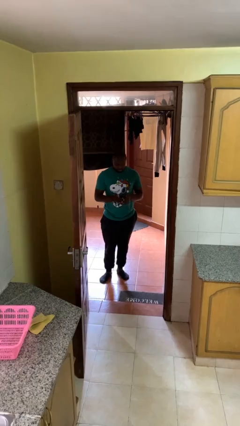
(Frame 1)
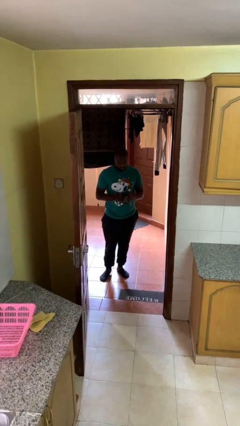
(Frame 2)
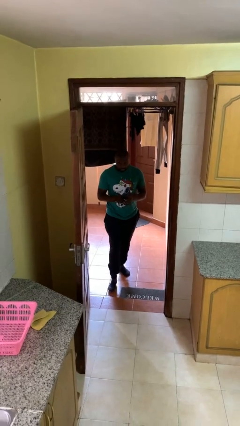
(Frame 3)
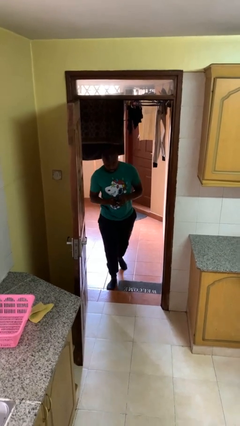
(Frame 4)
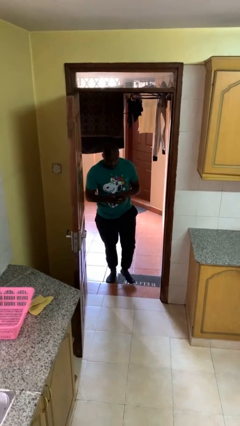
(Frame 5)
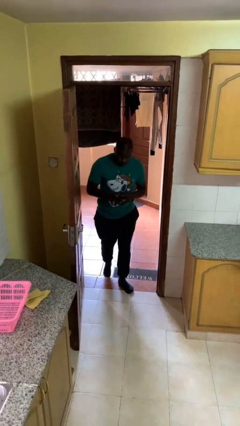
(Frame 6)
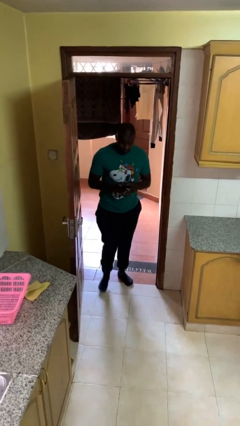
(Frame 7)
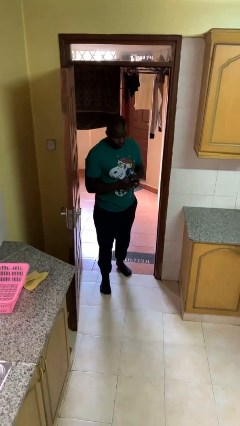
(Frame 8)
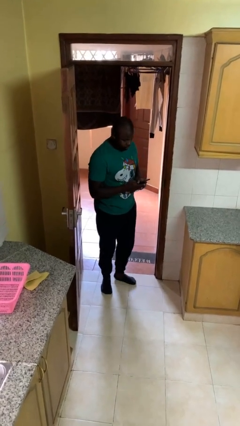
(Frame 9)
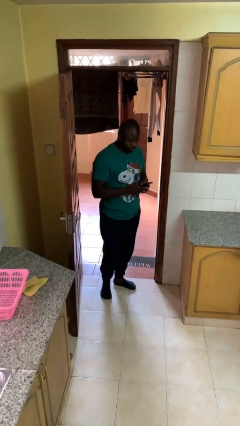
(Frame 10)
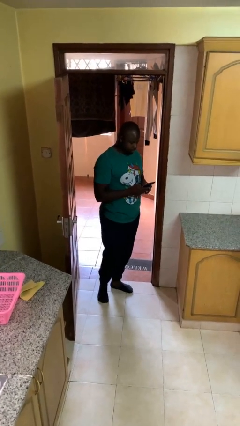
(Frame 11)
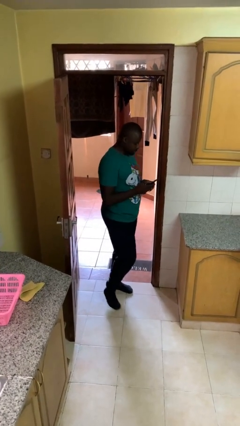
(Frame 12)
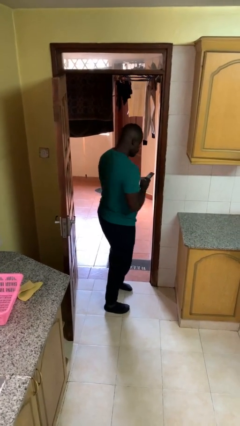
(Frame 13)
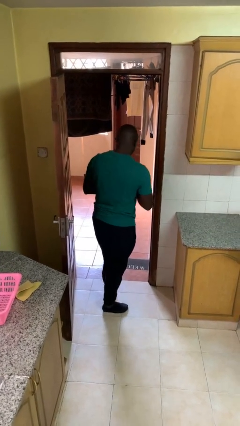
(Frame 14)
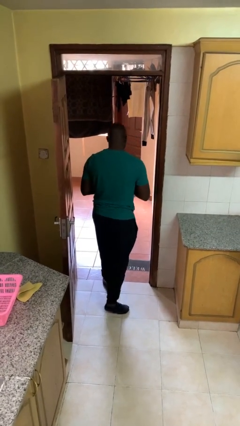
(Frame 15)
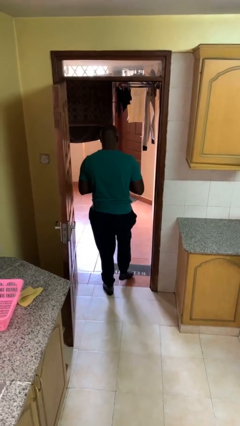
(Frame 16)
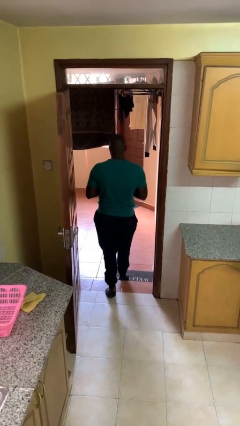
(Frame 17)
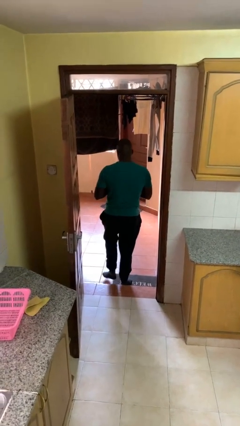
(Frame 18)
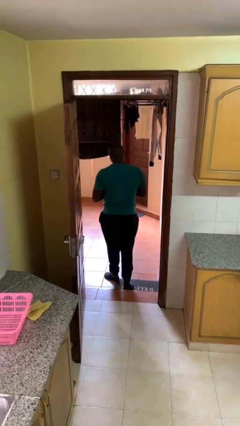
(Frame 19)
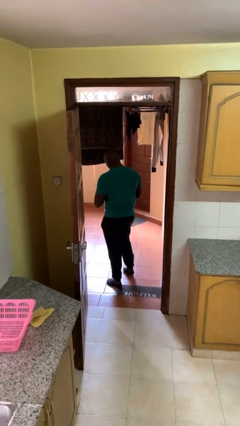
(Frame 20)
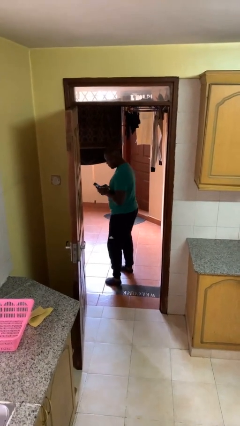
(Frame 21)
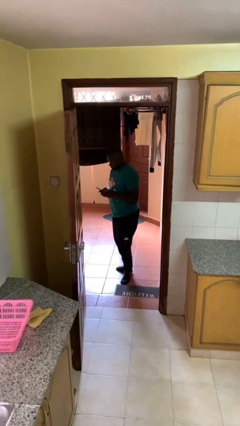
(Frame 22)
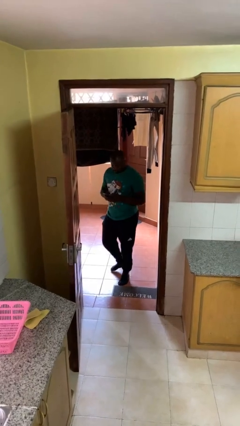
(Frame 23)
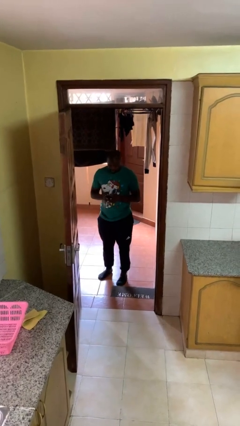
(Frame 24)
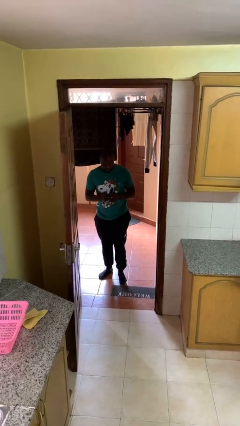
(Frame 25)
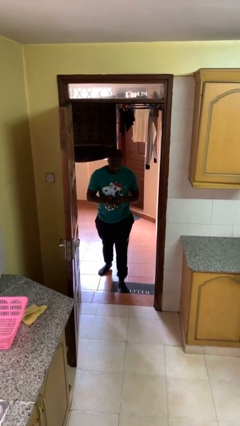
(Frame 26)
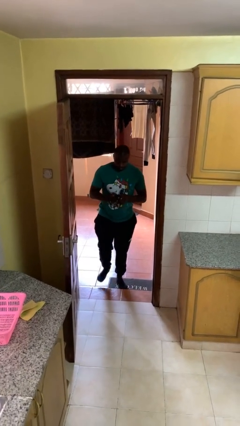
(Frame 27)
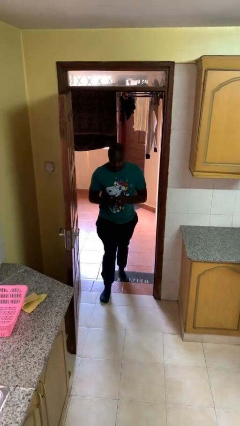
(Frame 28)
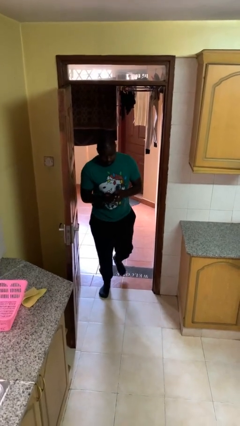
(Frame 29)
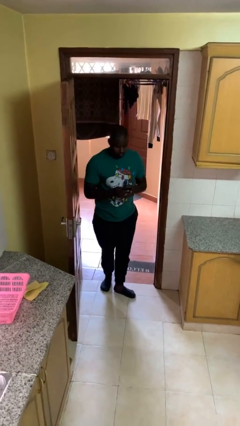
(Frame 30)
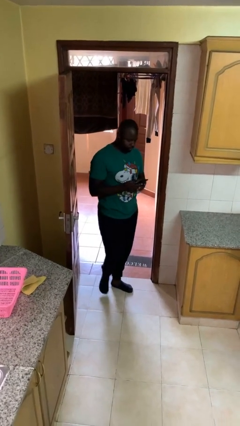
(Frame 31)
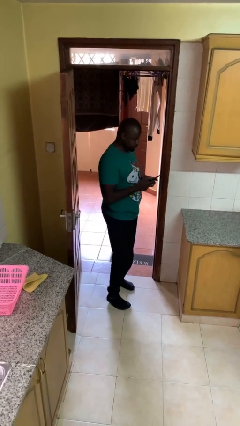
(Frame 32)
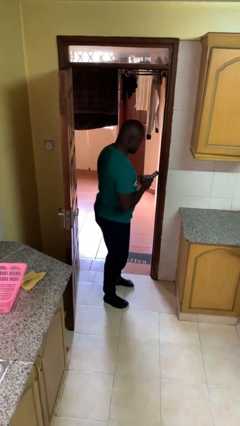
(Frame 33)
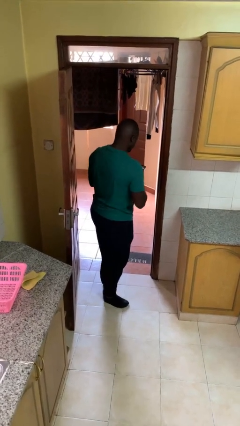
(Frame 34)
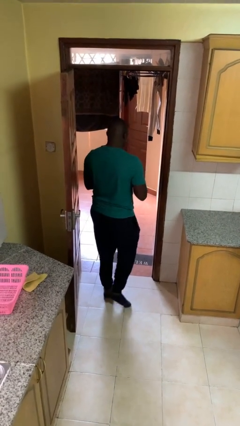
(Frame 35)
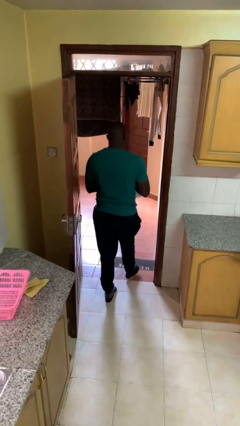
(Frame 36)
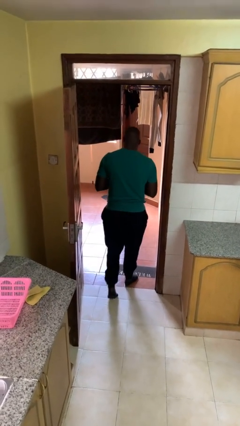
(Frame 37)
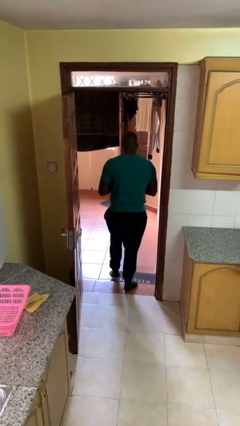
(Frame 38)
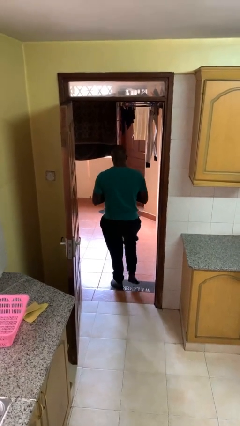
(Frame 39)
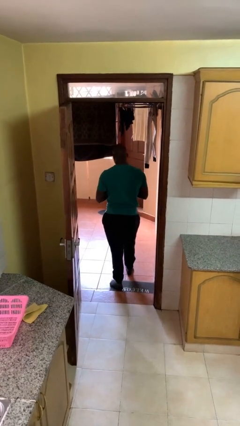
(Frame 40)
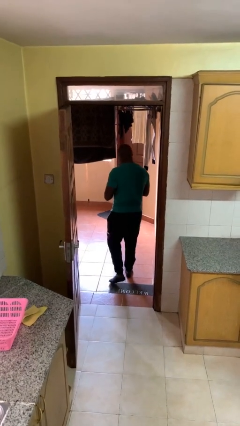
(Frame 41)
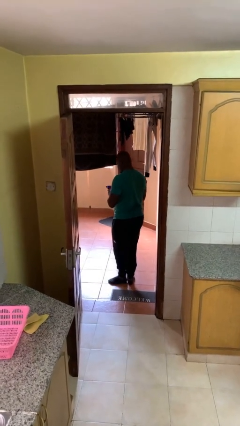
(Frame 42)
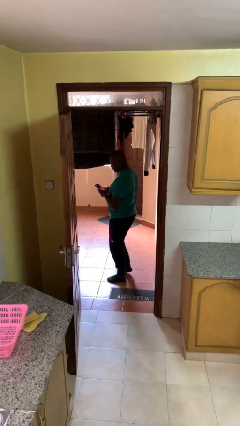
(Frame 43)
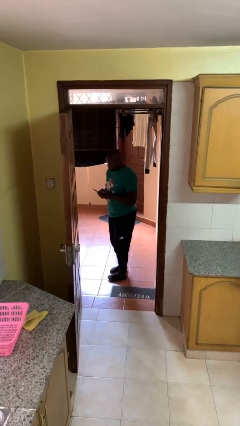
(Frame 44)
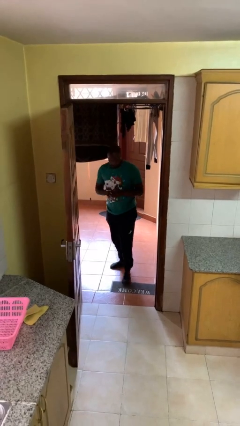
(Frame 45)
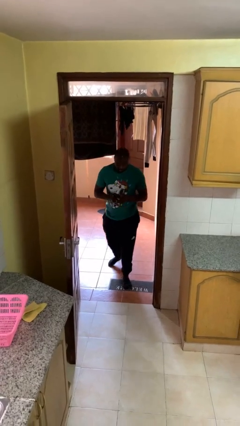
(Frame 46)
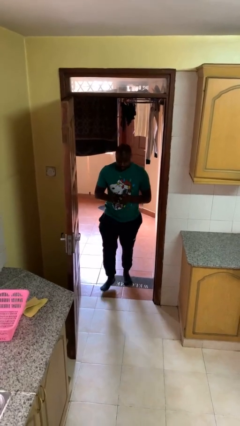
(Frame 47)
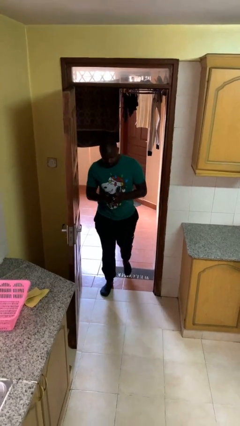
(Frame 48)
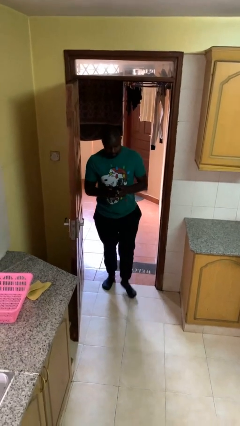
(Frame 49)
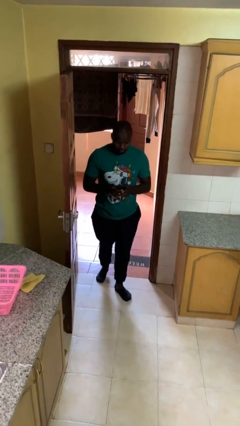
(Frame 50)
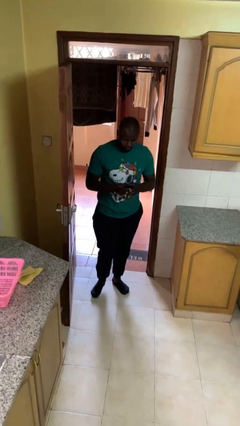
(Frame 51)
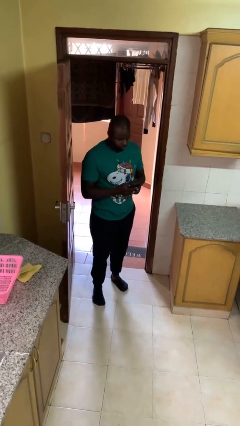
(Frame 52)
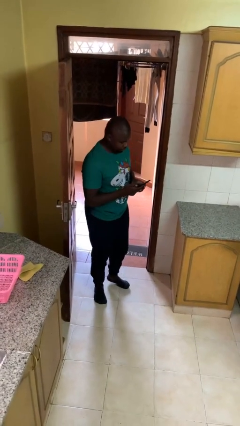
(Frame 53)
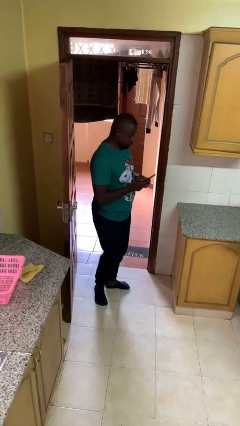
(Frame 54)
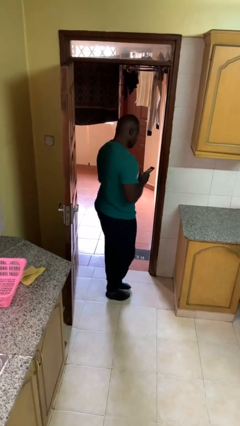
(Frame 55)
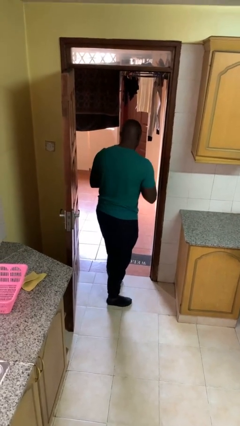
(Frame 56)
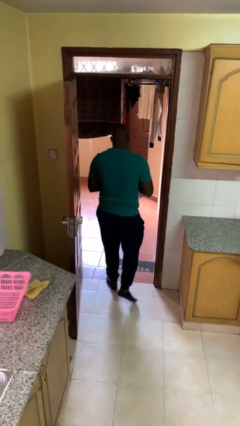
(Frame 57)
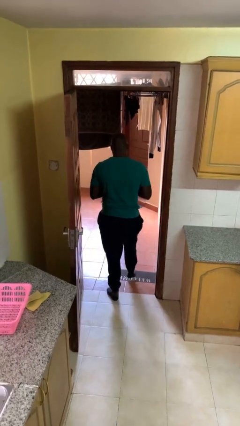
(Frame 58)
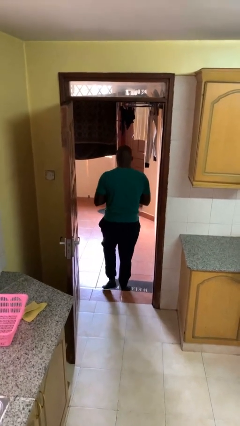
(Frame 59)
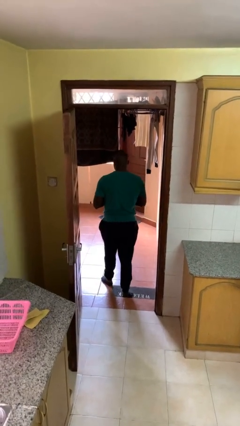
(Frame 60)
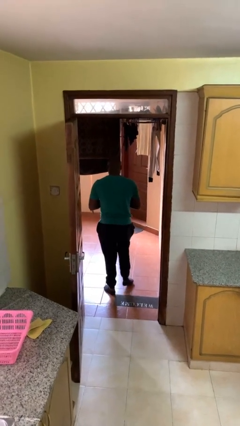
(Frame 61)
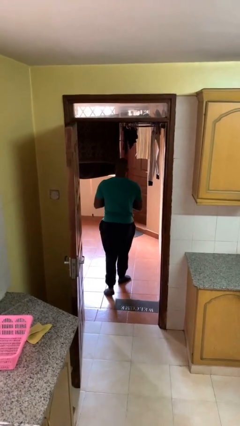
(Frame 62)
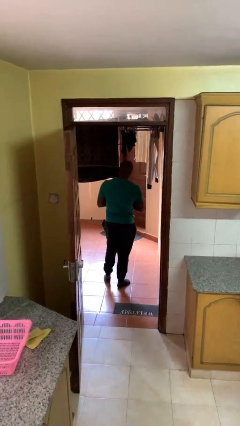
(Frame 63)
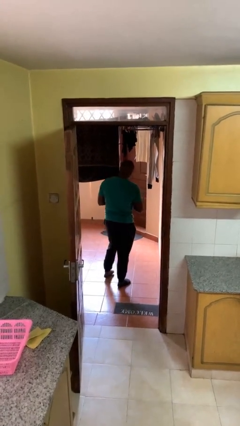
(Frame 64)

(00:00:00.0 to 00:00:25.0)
person texts on phone

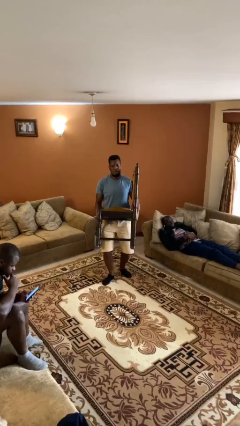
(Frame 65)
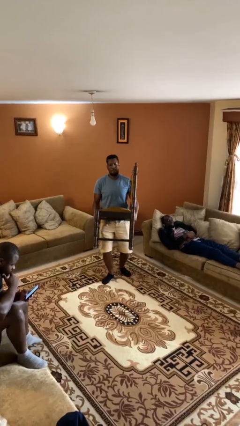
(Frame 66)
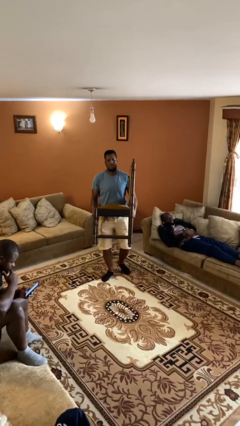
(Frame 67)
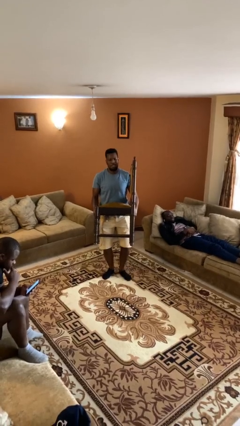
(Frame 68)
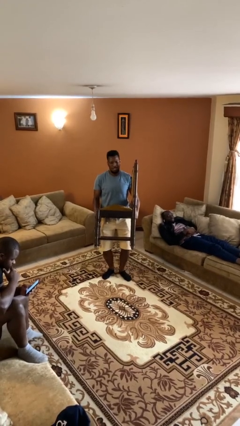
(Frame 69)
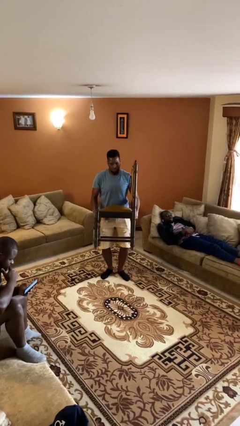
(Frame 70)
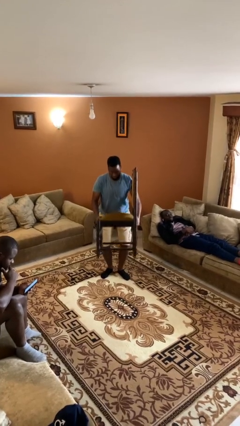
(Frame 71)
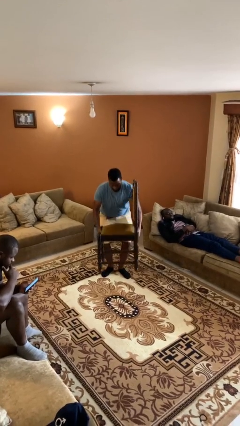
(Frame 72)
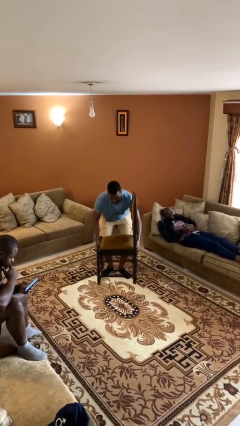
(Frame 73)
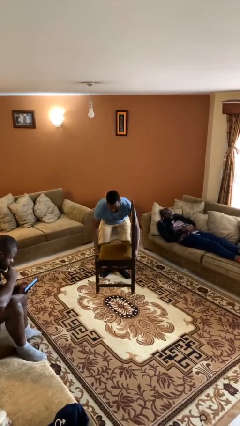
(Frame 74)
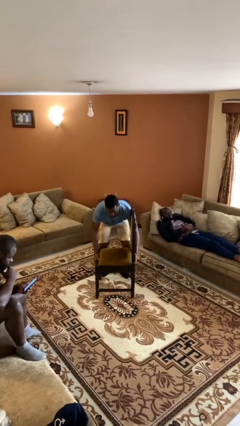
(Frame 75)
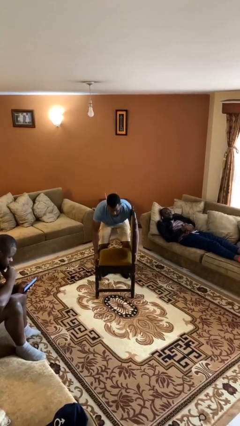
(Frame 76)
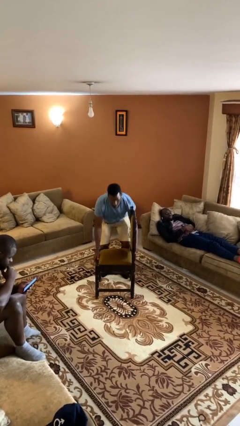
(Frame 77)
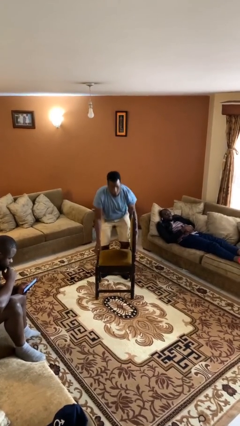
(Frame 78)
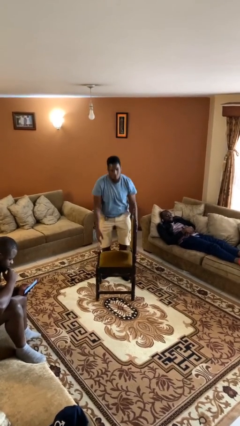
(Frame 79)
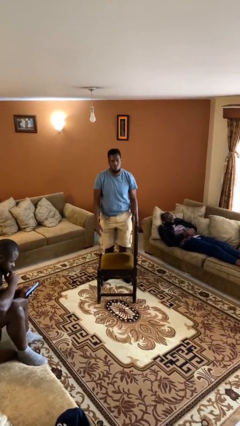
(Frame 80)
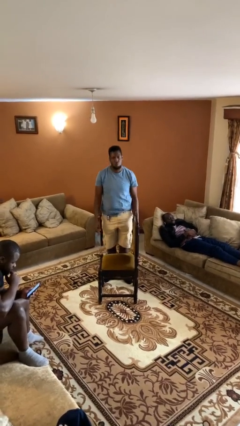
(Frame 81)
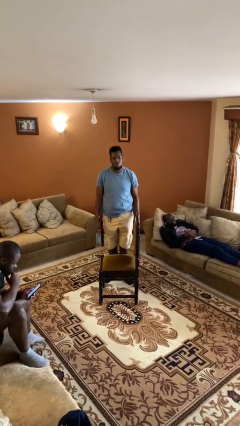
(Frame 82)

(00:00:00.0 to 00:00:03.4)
person puts down object on floor

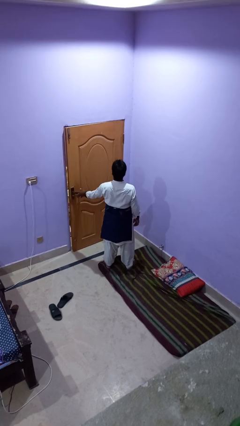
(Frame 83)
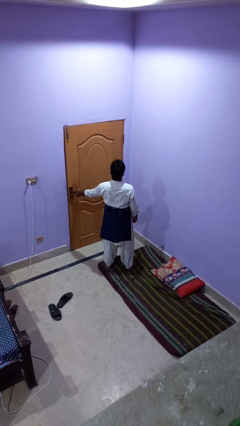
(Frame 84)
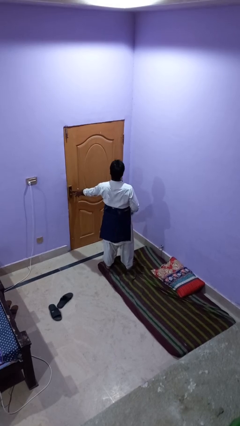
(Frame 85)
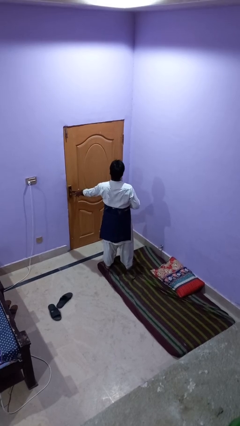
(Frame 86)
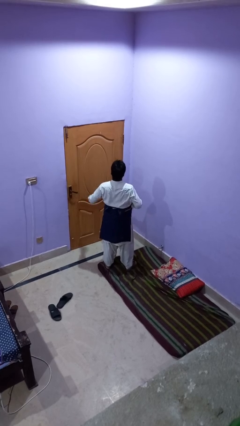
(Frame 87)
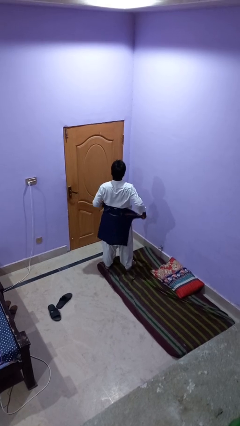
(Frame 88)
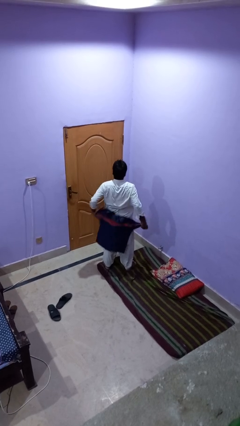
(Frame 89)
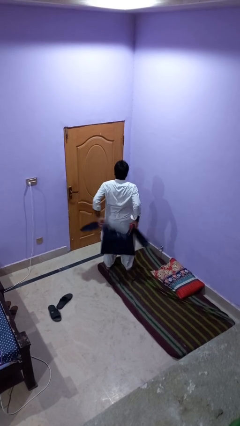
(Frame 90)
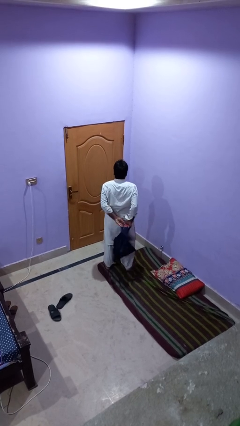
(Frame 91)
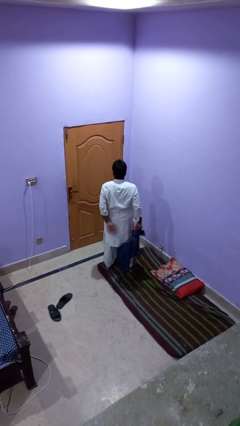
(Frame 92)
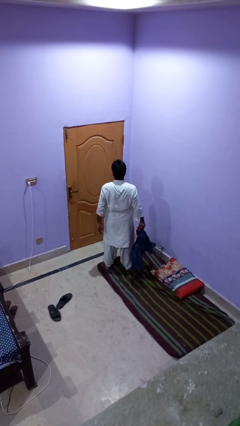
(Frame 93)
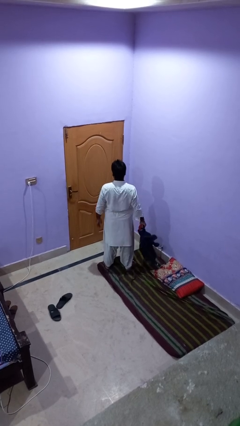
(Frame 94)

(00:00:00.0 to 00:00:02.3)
person unties jacket around waist
